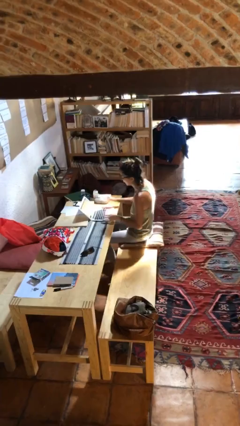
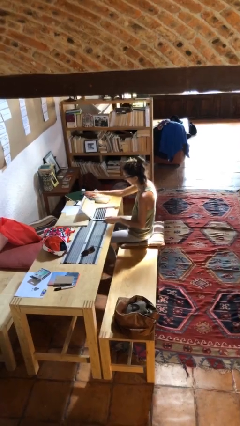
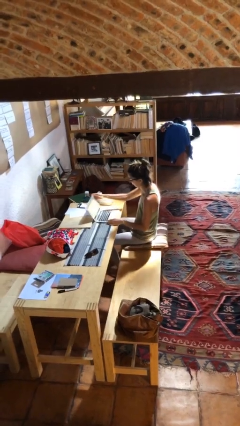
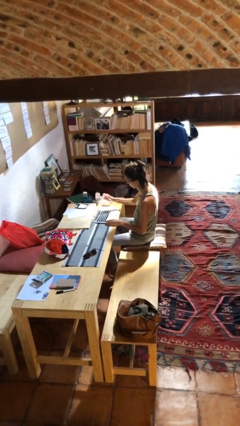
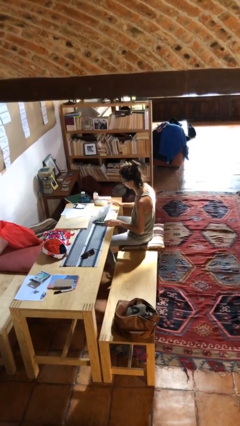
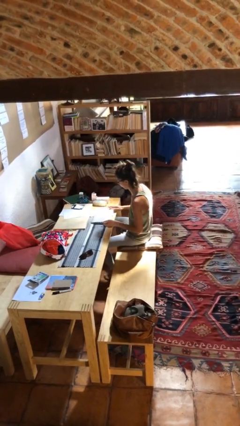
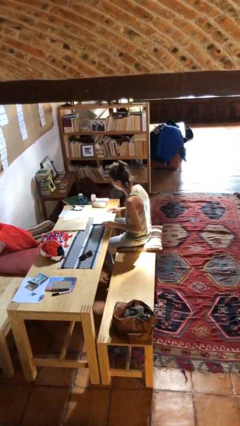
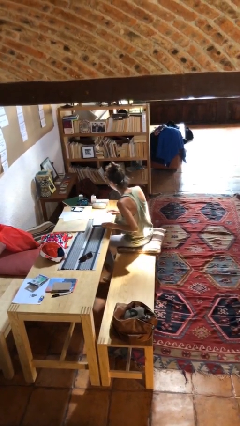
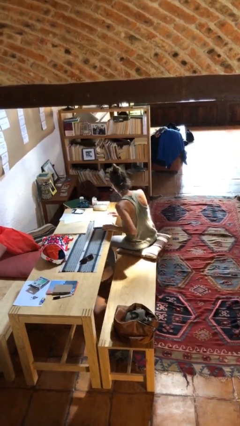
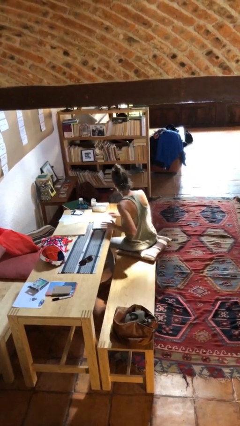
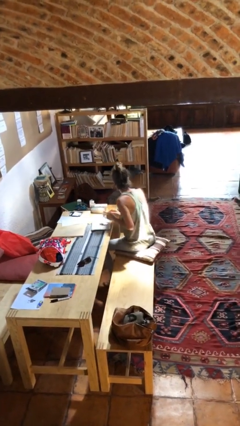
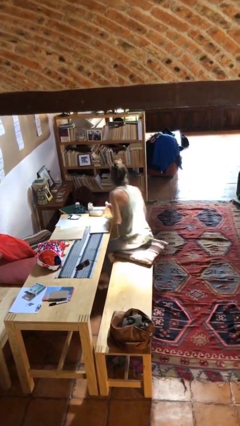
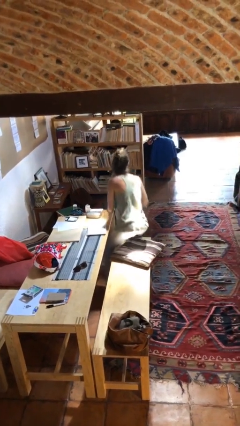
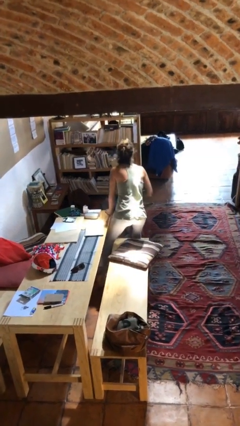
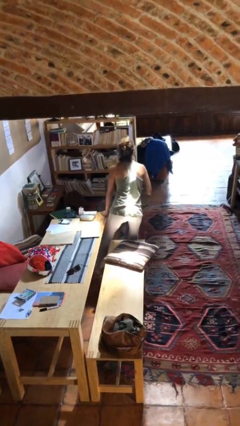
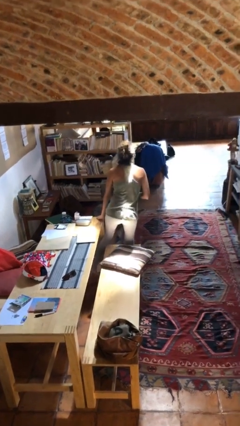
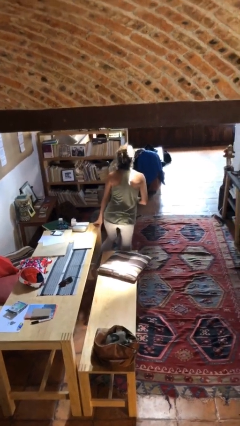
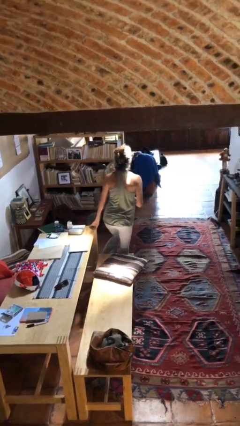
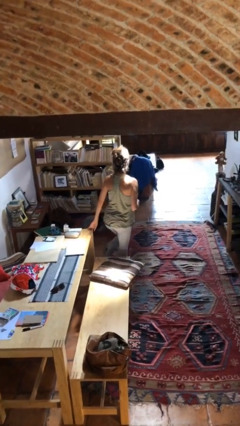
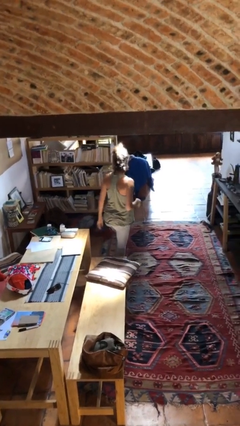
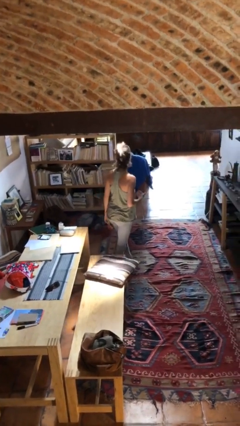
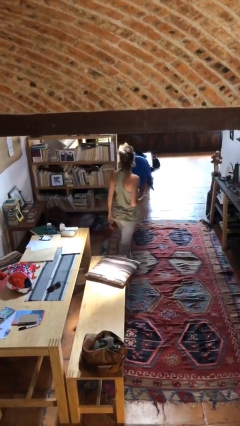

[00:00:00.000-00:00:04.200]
person stands up

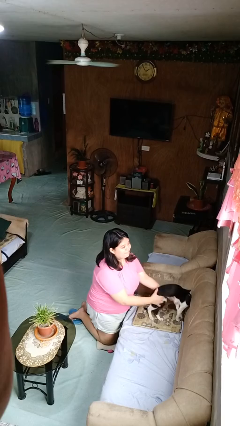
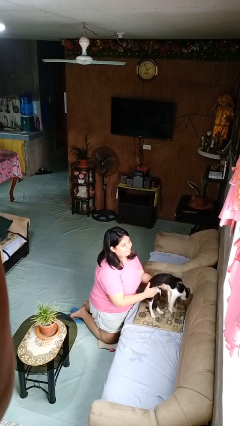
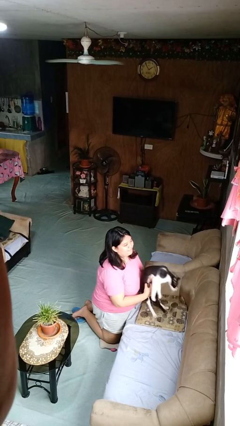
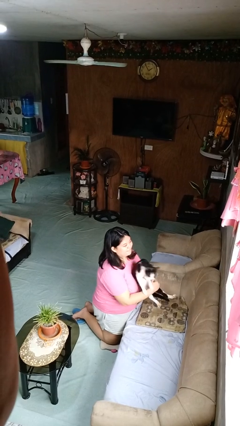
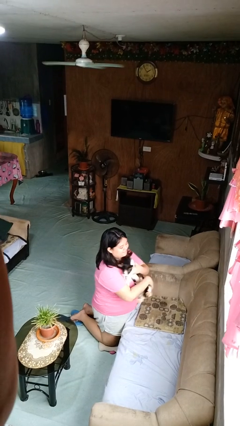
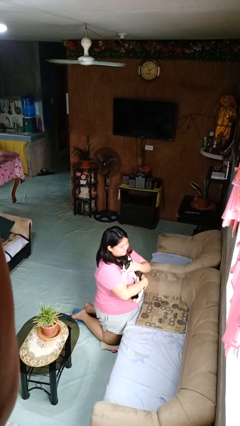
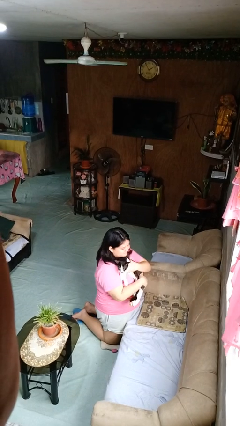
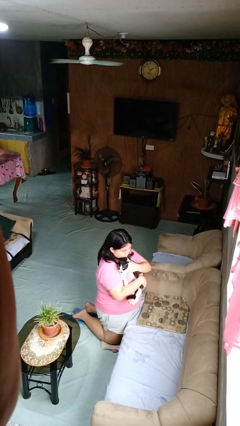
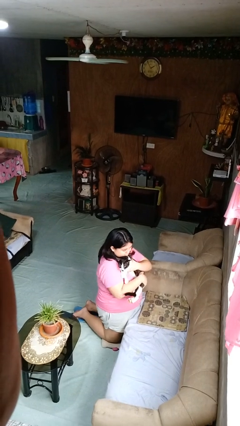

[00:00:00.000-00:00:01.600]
person hugs cat

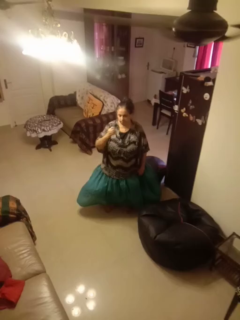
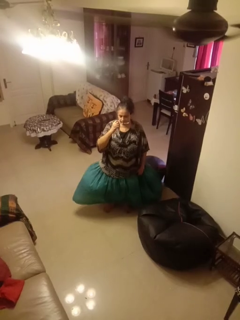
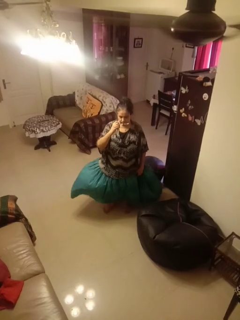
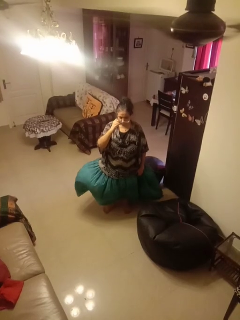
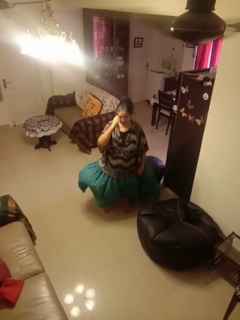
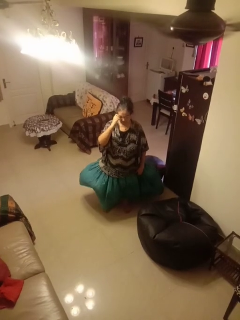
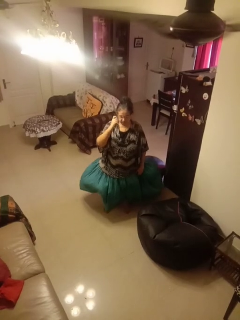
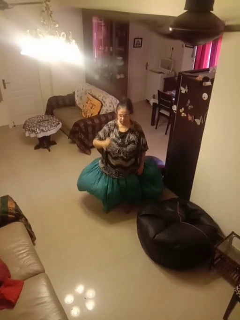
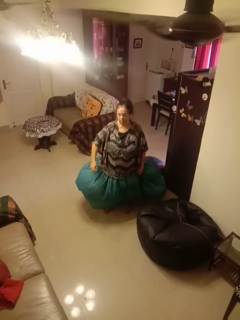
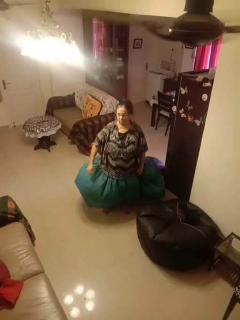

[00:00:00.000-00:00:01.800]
person puts on glasses

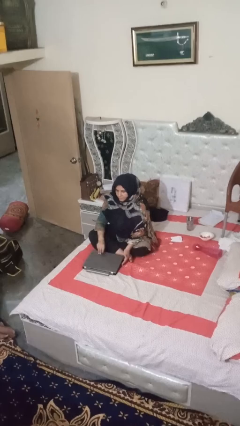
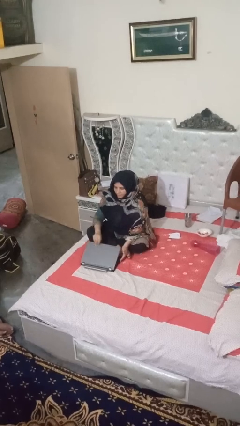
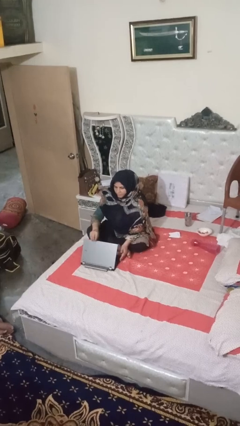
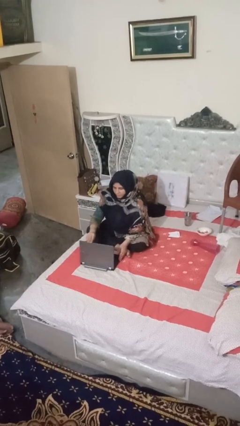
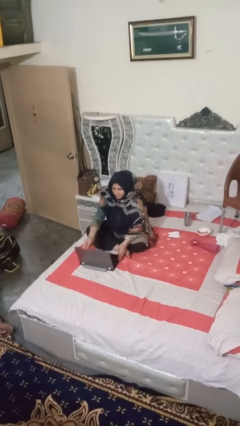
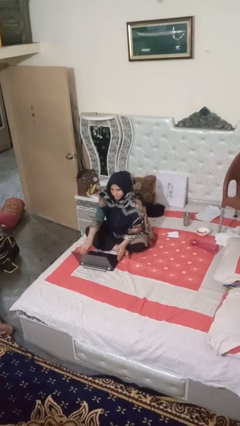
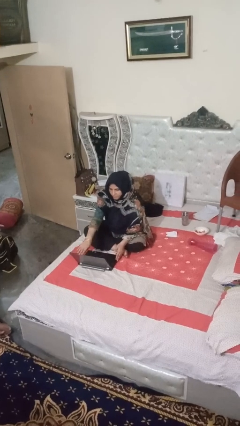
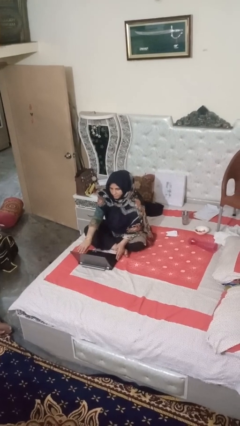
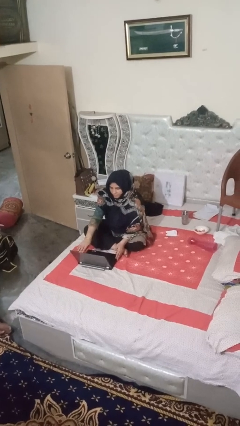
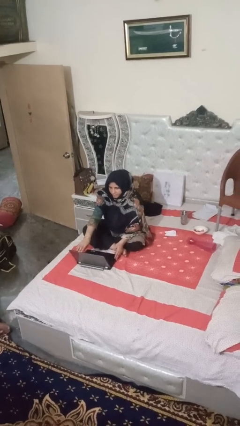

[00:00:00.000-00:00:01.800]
person opens laptop

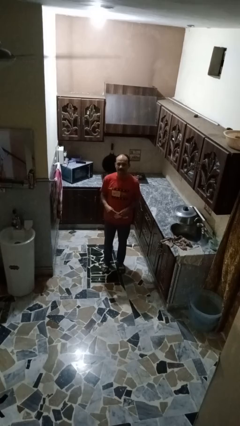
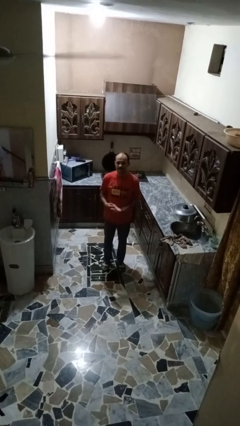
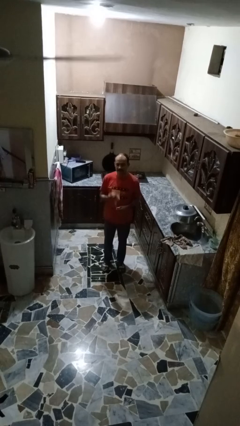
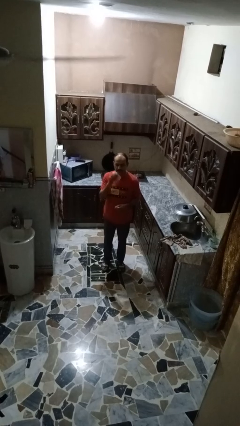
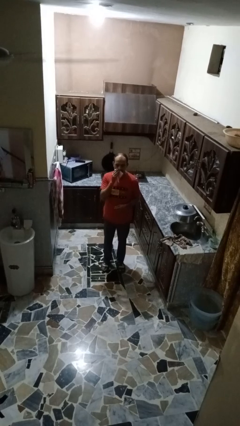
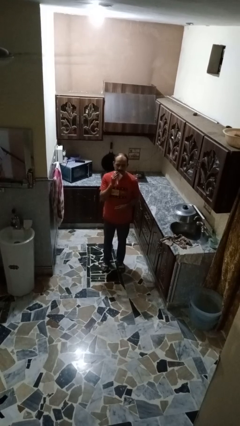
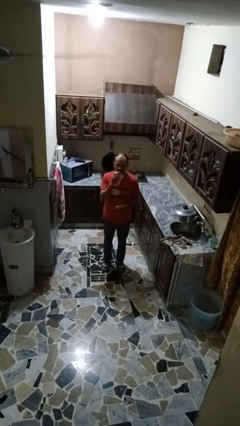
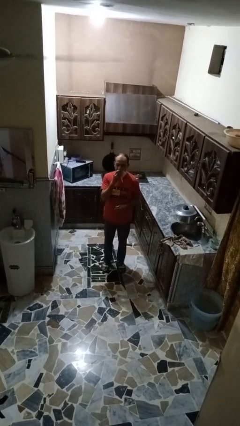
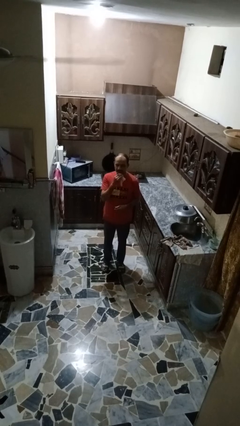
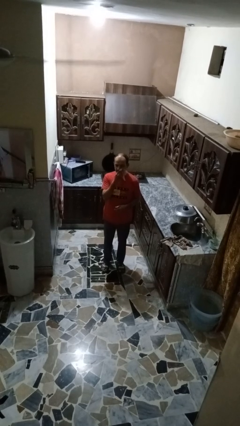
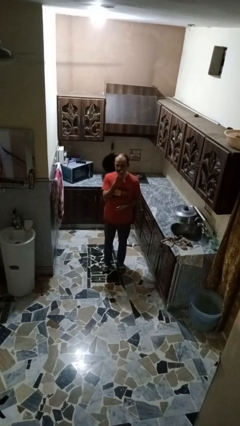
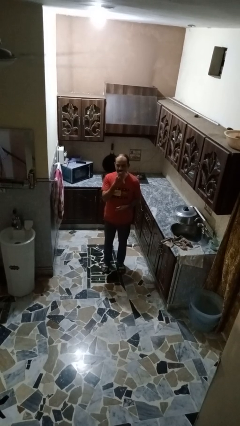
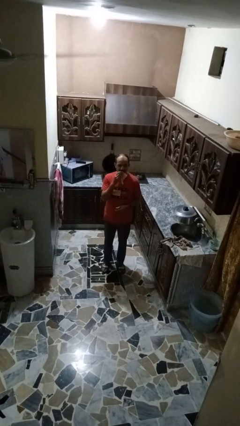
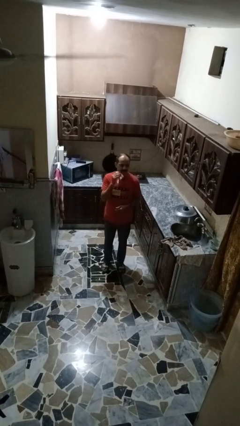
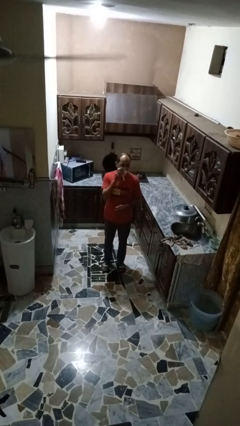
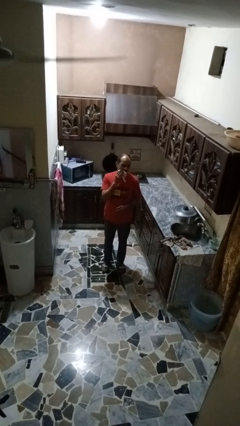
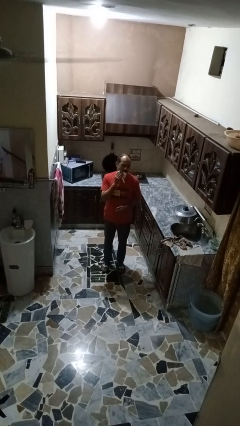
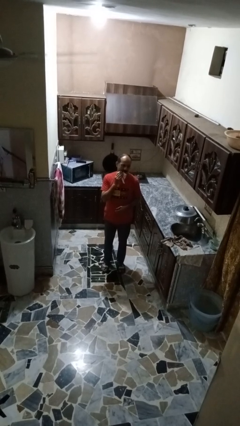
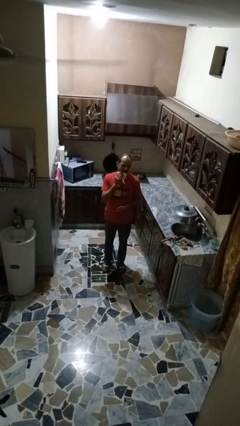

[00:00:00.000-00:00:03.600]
person wipes mouth with napkin

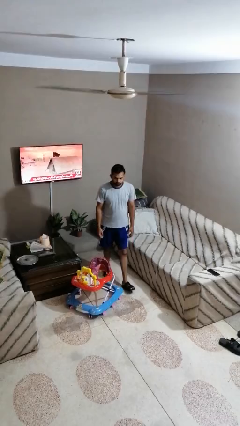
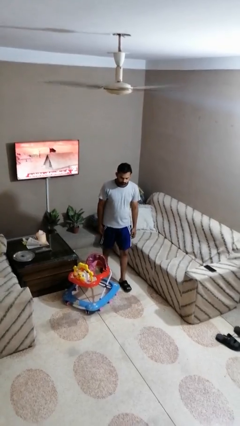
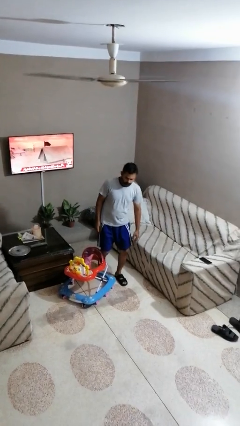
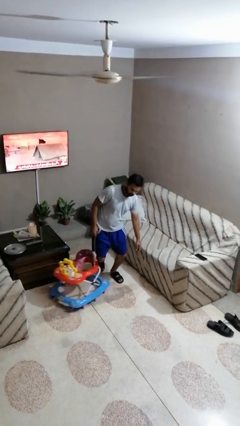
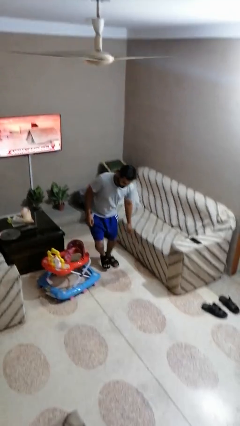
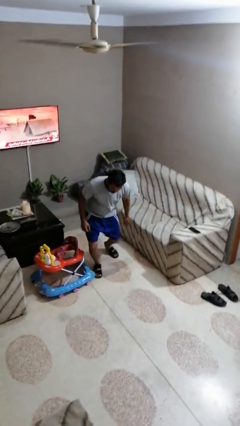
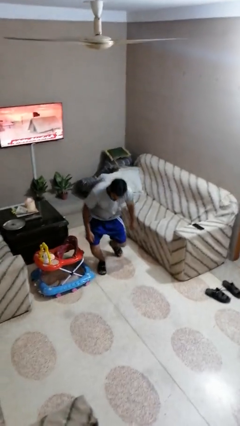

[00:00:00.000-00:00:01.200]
person trips on object on floor

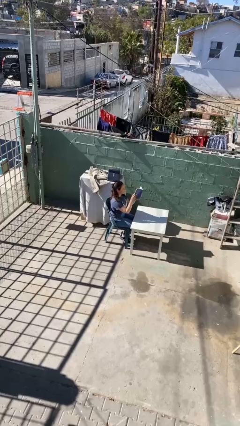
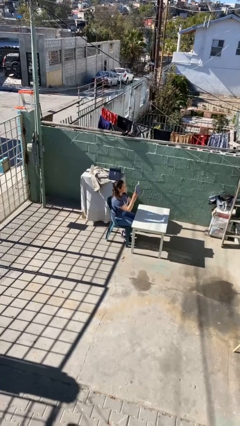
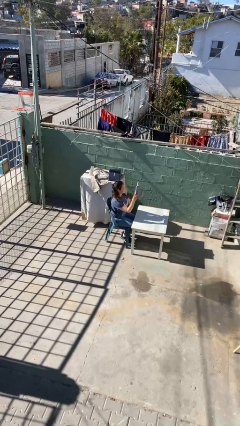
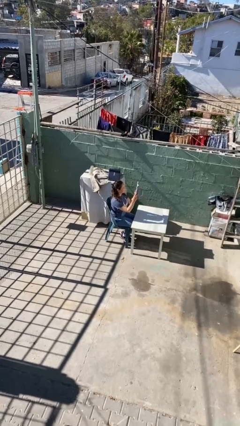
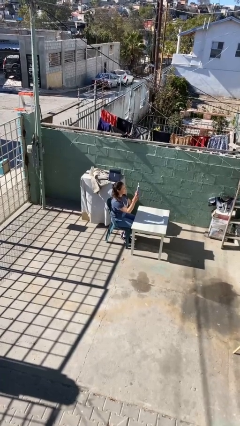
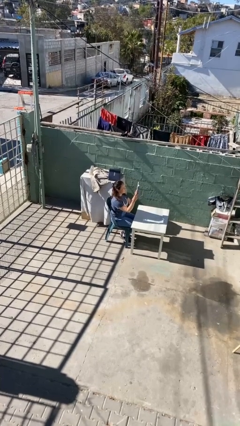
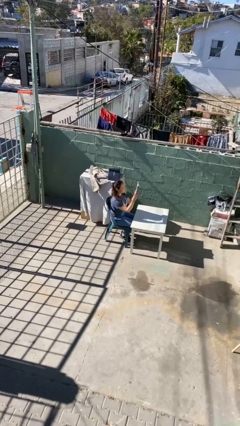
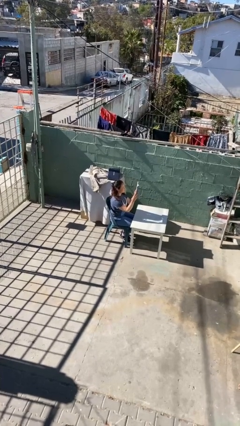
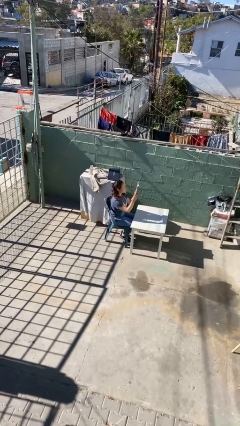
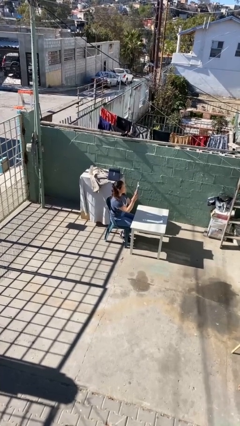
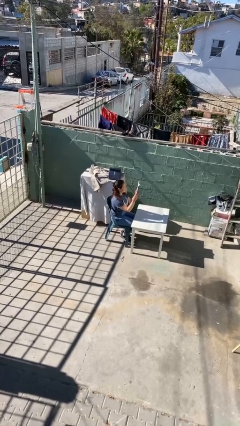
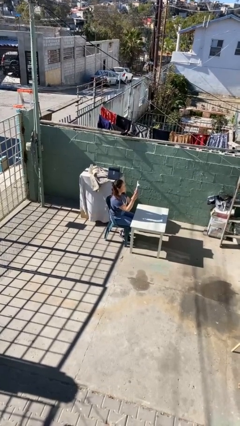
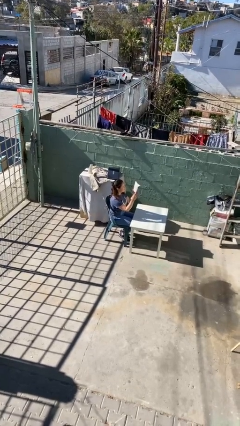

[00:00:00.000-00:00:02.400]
person reads document

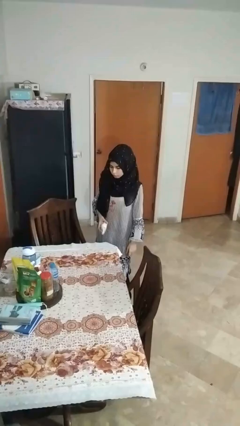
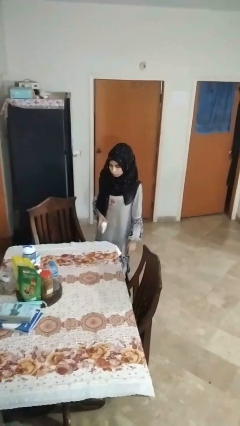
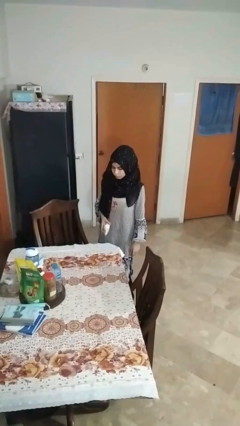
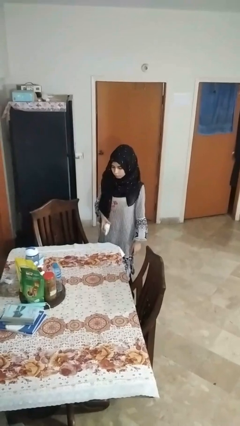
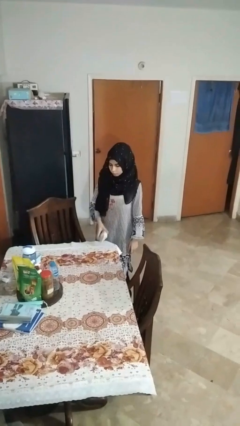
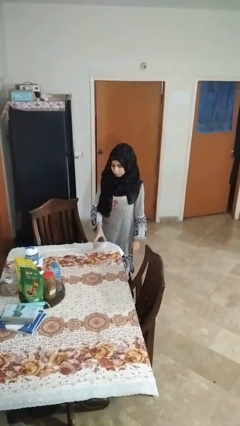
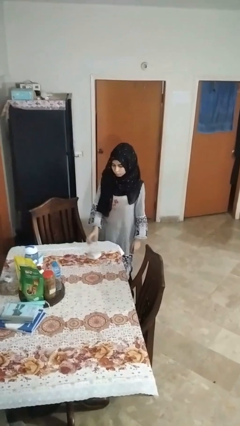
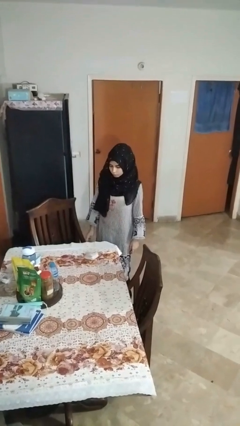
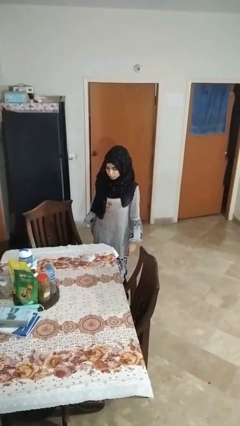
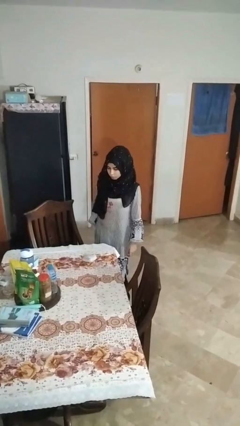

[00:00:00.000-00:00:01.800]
person throws object on table
